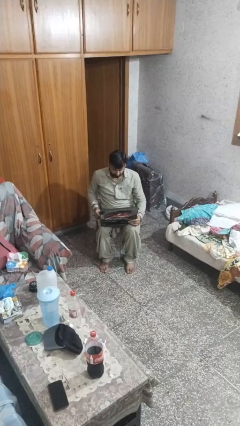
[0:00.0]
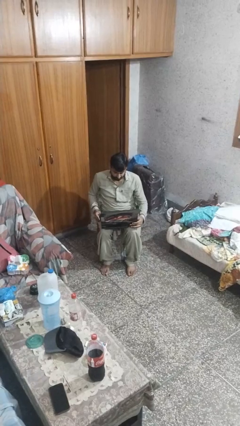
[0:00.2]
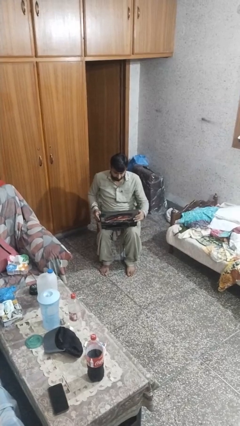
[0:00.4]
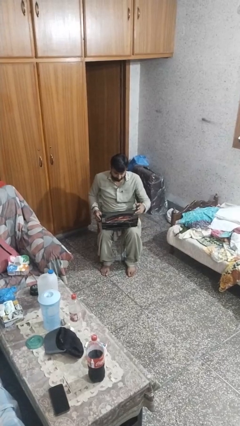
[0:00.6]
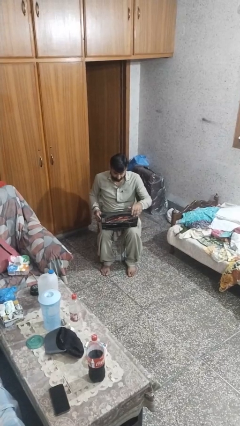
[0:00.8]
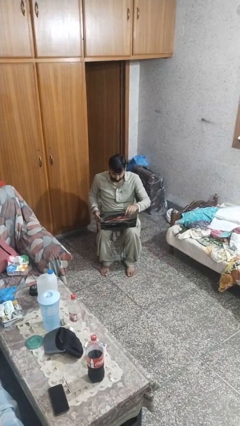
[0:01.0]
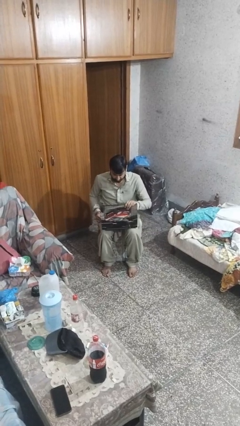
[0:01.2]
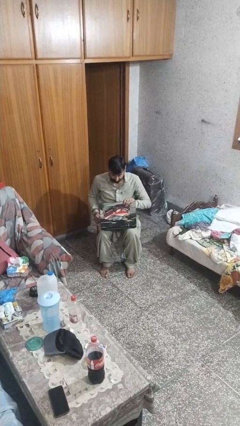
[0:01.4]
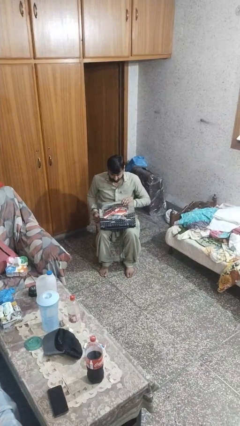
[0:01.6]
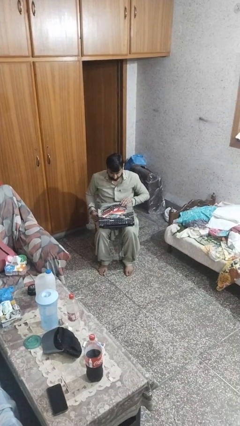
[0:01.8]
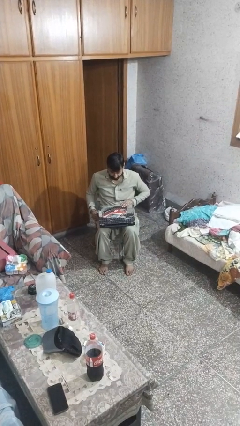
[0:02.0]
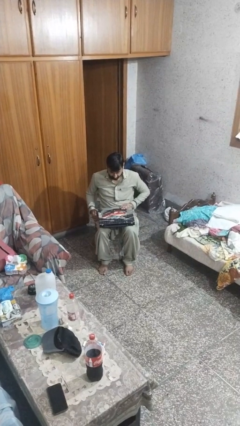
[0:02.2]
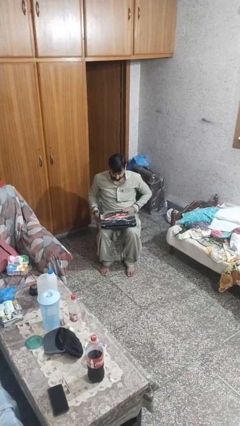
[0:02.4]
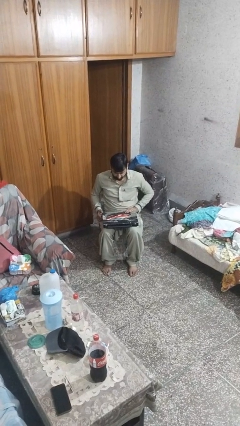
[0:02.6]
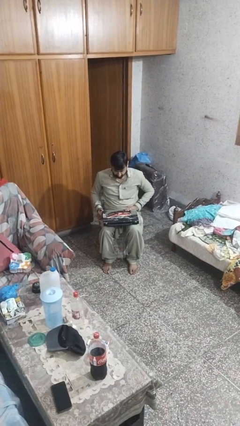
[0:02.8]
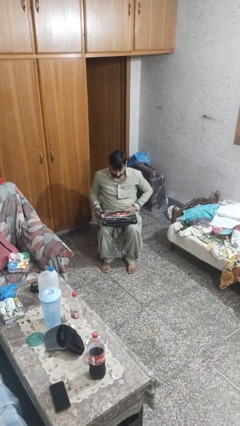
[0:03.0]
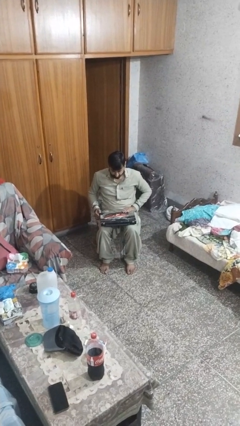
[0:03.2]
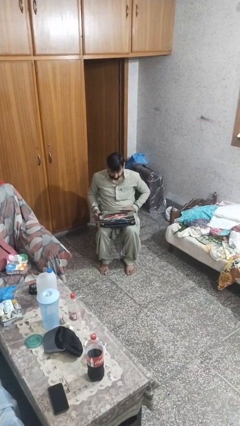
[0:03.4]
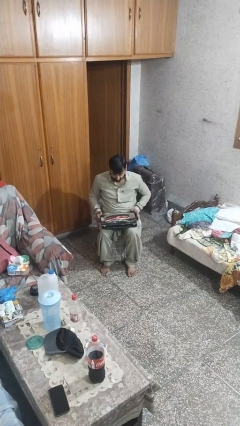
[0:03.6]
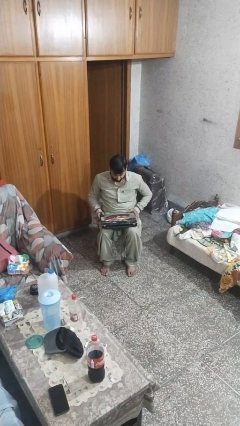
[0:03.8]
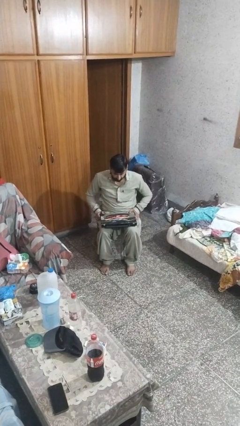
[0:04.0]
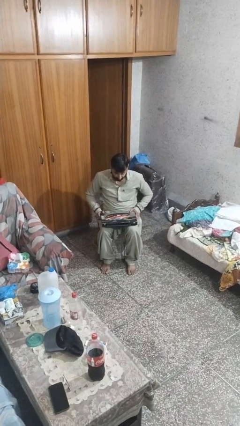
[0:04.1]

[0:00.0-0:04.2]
person closes laptop

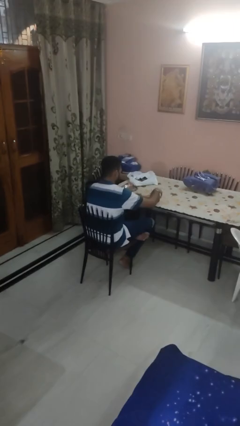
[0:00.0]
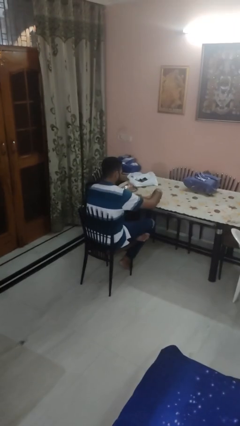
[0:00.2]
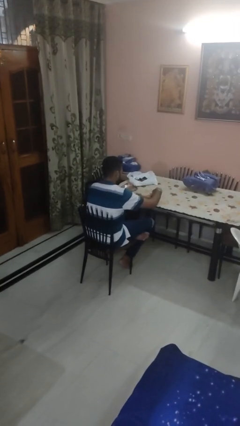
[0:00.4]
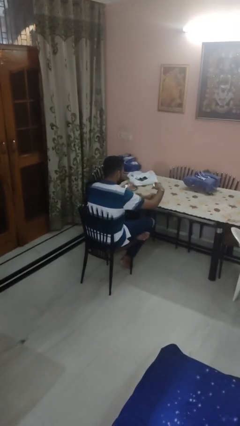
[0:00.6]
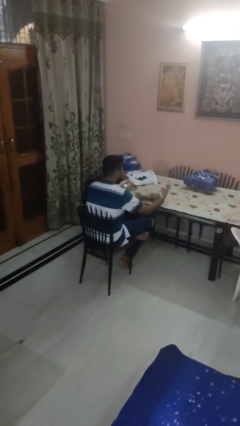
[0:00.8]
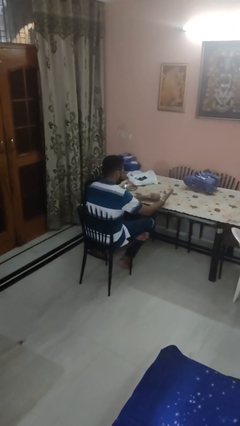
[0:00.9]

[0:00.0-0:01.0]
person opens jar

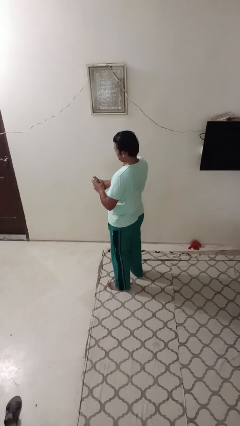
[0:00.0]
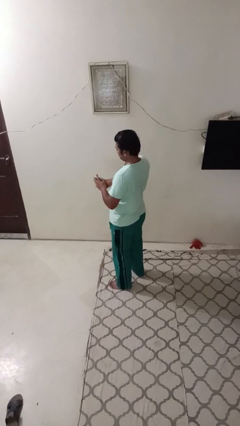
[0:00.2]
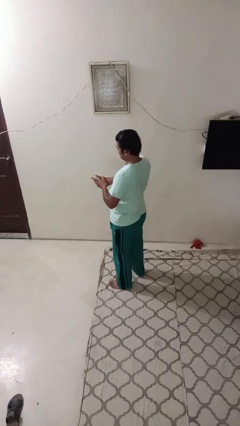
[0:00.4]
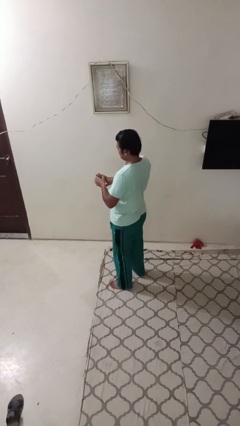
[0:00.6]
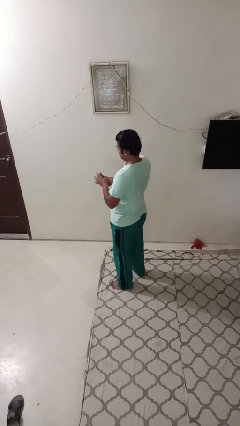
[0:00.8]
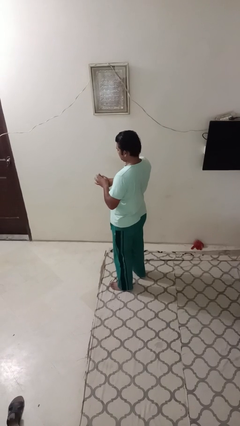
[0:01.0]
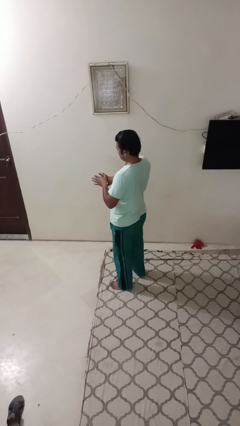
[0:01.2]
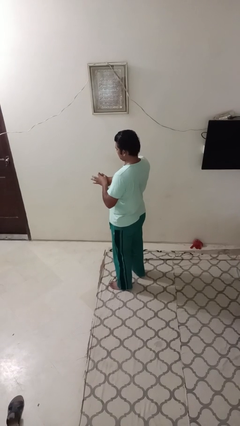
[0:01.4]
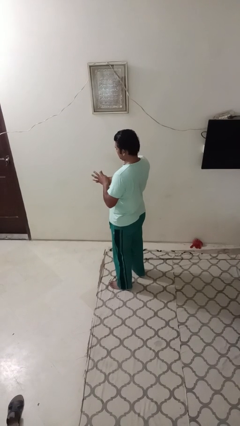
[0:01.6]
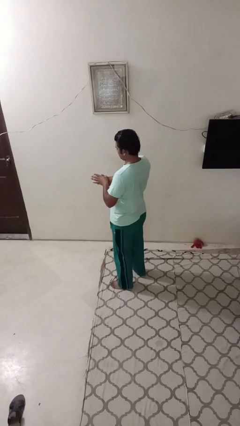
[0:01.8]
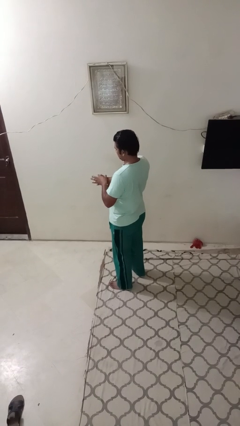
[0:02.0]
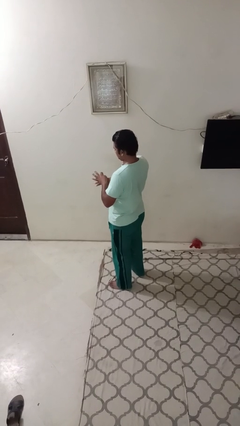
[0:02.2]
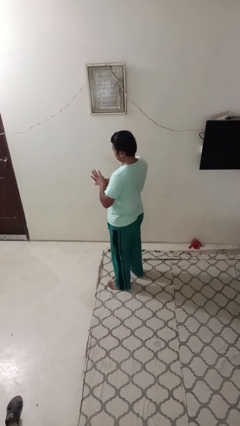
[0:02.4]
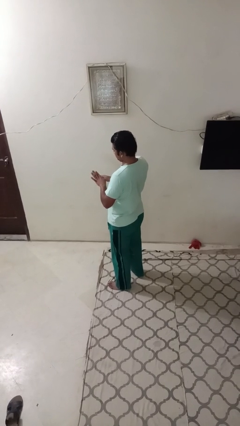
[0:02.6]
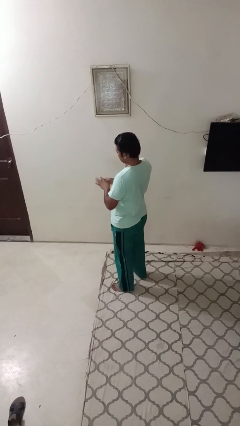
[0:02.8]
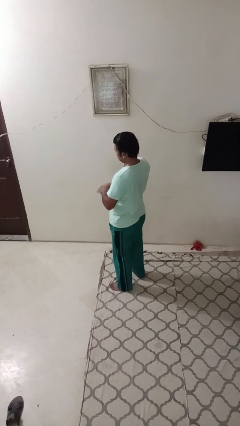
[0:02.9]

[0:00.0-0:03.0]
person cracks knuckles

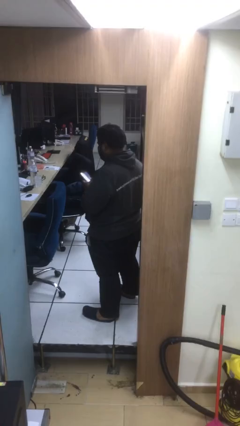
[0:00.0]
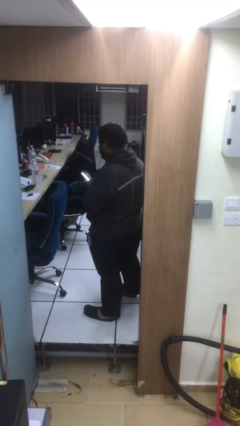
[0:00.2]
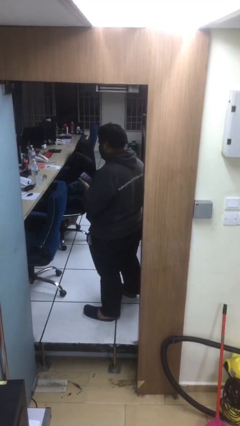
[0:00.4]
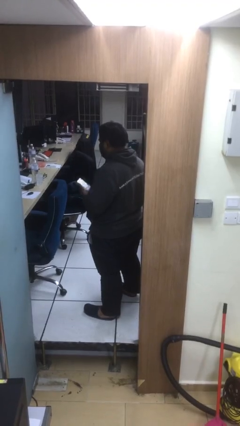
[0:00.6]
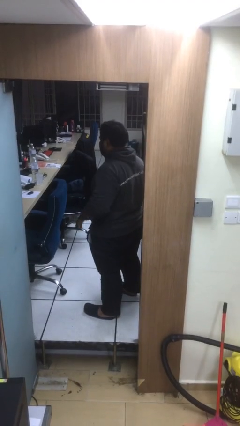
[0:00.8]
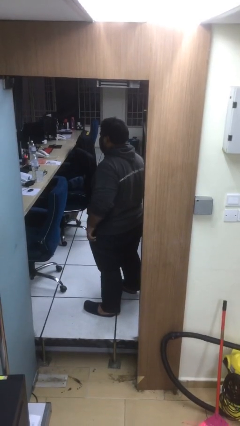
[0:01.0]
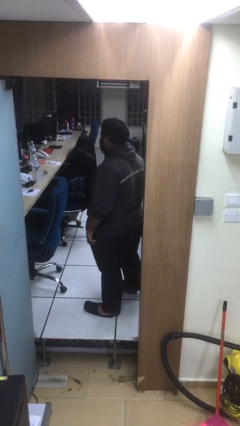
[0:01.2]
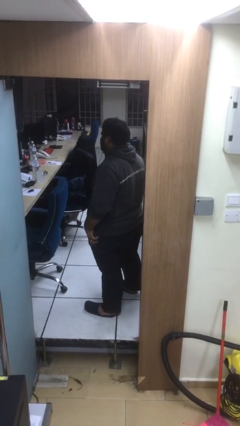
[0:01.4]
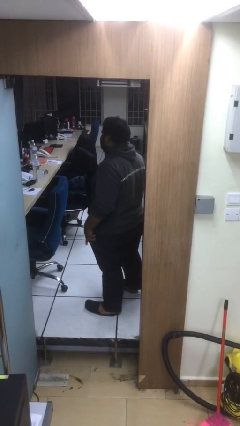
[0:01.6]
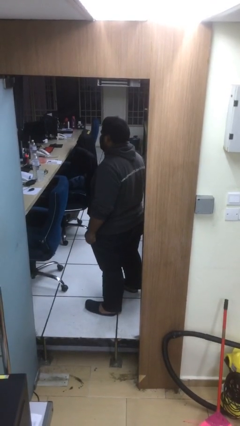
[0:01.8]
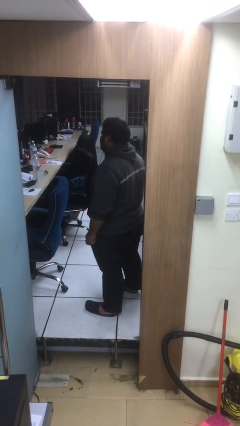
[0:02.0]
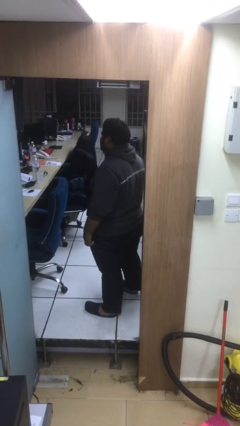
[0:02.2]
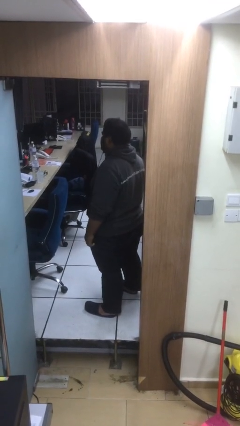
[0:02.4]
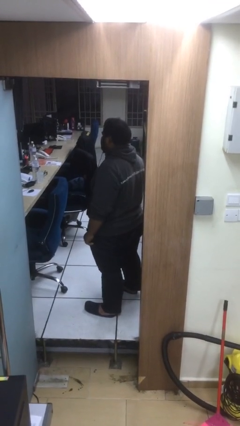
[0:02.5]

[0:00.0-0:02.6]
person puts phone into pocket

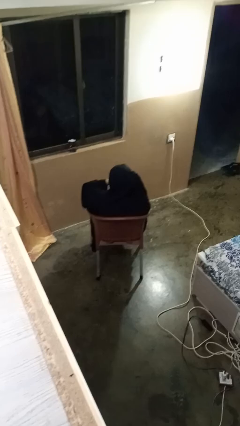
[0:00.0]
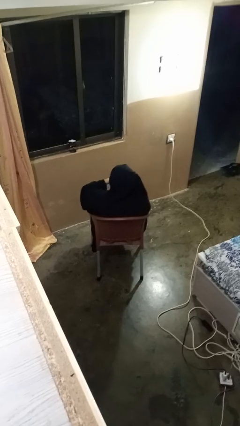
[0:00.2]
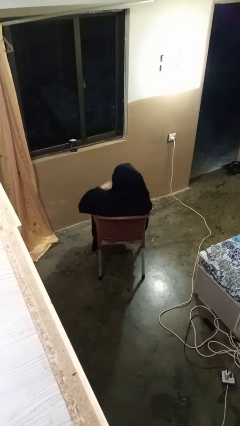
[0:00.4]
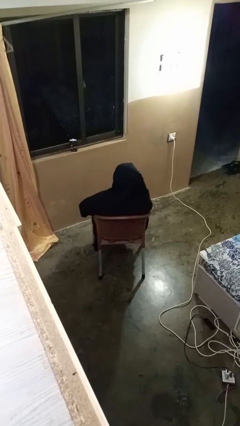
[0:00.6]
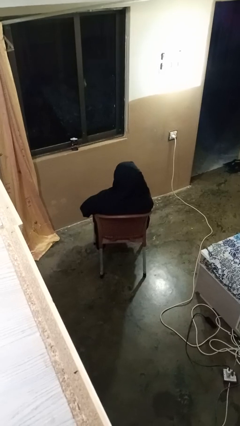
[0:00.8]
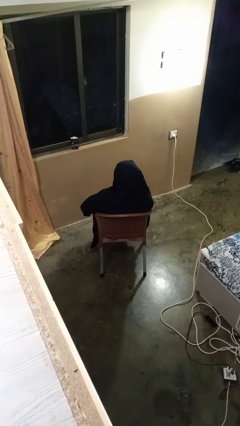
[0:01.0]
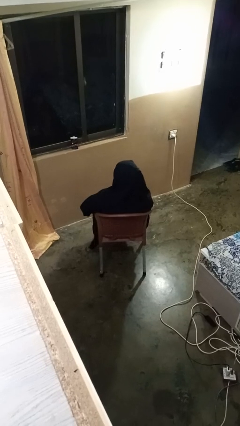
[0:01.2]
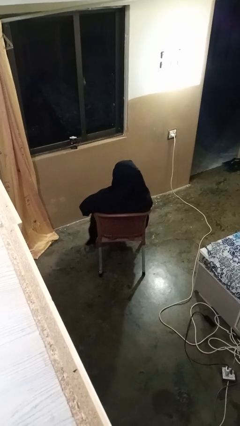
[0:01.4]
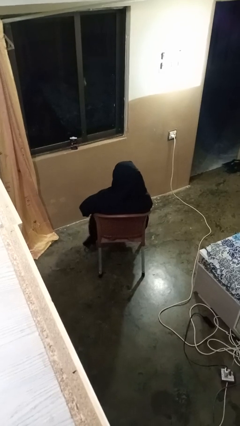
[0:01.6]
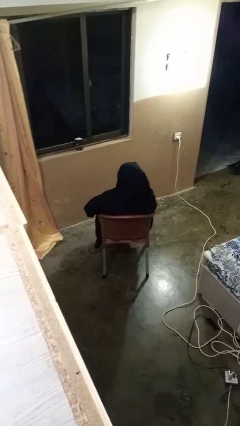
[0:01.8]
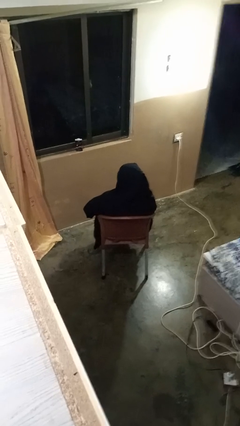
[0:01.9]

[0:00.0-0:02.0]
person gestures swipe down

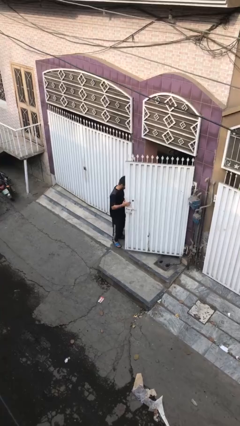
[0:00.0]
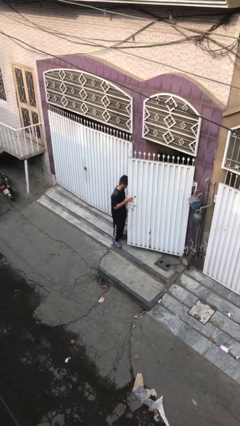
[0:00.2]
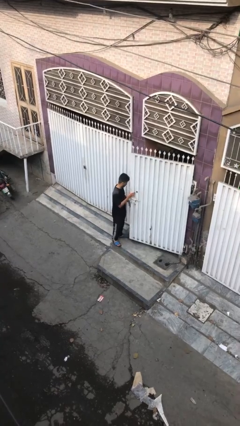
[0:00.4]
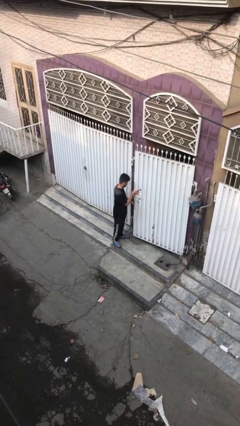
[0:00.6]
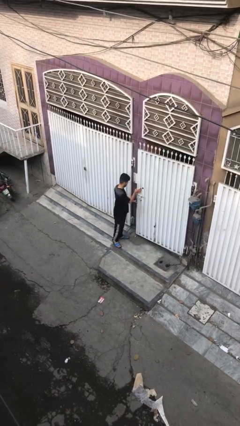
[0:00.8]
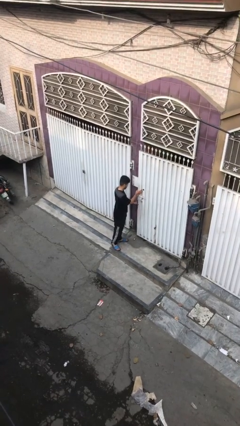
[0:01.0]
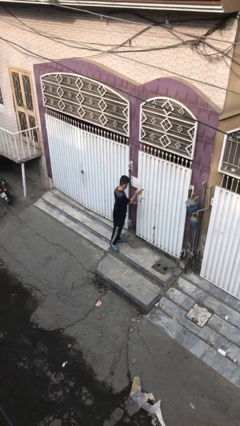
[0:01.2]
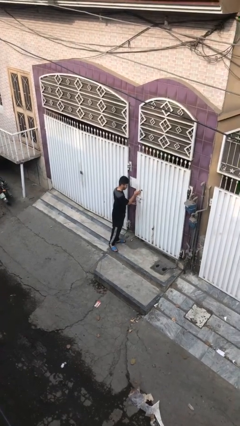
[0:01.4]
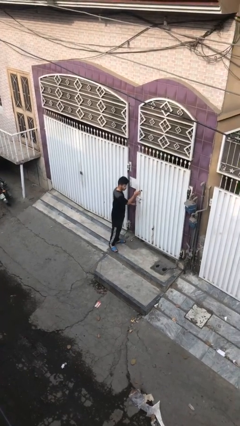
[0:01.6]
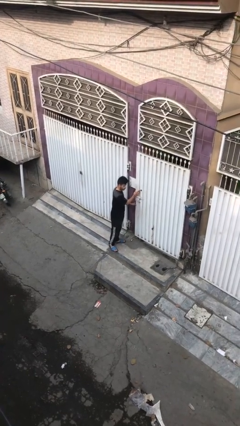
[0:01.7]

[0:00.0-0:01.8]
person closes facility door

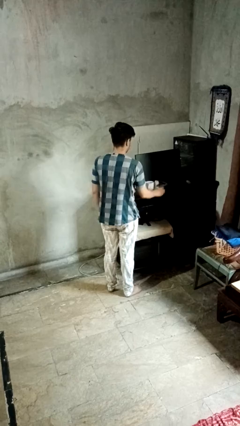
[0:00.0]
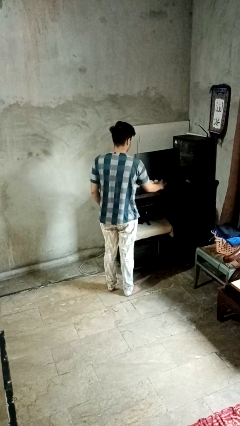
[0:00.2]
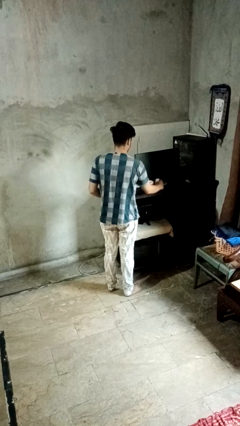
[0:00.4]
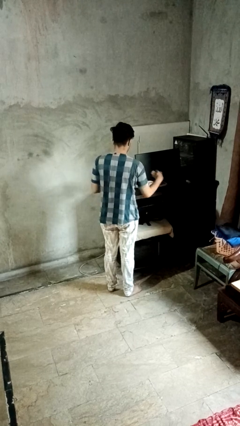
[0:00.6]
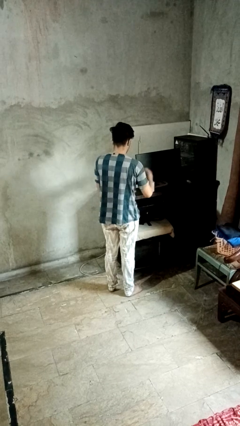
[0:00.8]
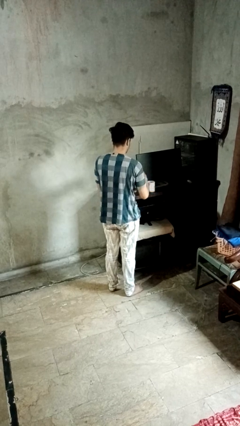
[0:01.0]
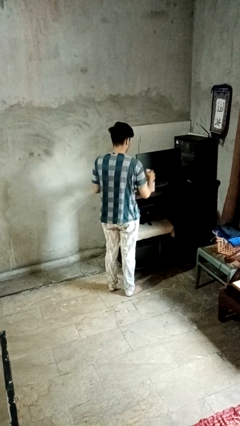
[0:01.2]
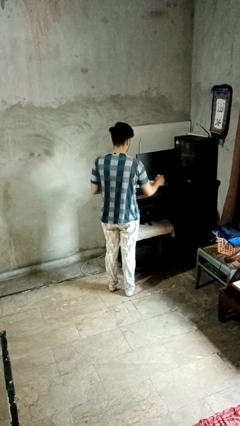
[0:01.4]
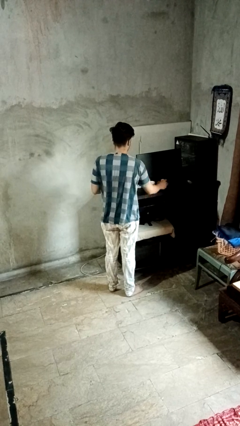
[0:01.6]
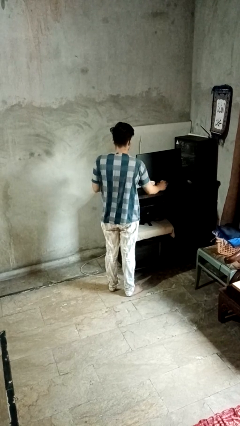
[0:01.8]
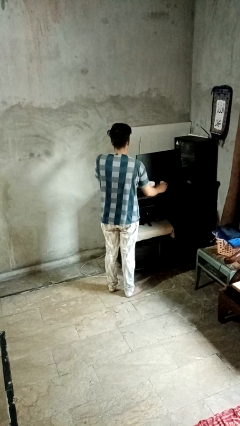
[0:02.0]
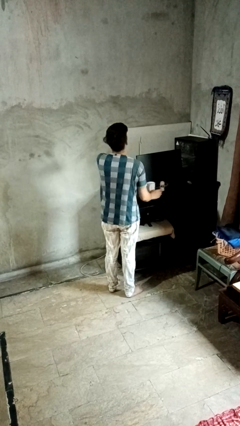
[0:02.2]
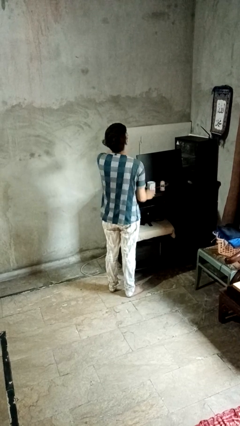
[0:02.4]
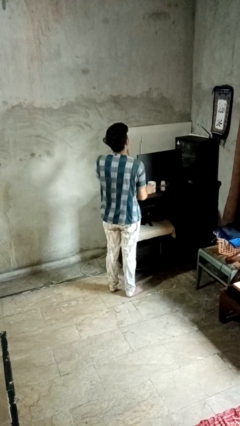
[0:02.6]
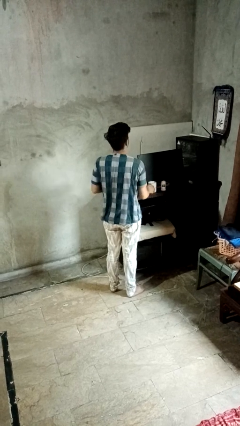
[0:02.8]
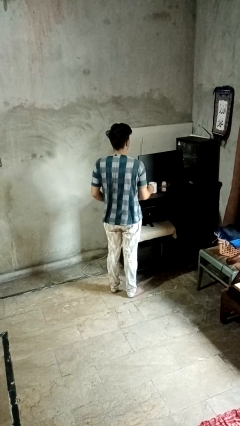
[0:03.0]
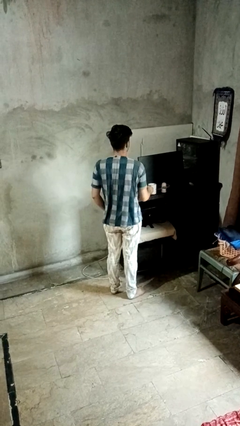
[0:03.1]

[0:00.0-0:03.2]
person takes medicine pills
